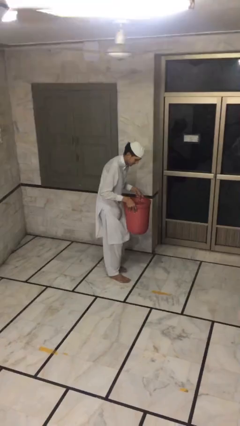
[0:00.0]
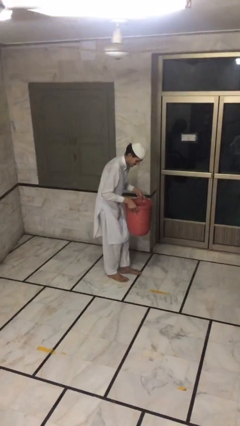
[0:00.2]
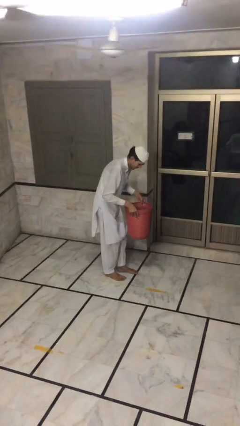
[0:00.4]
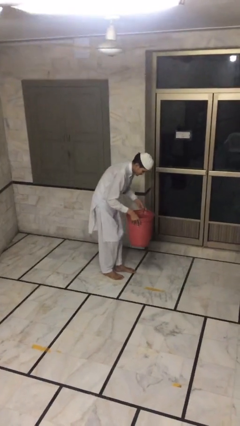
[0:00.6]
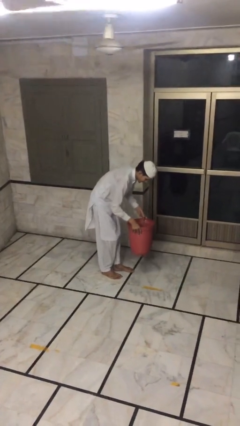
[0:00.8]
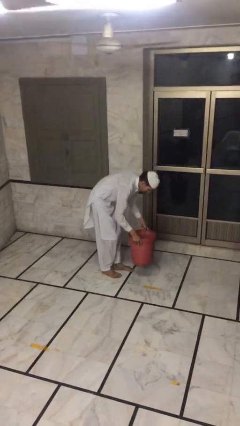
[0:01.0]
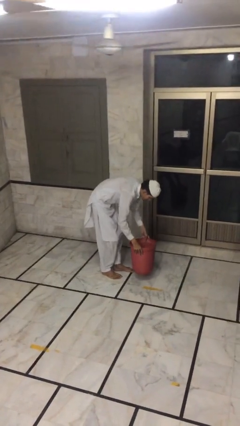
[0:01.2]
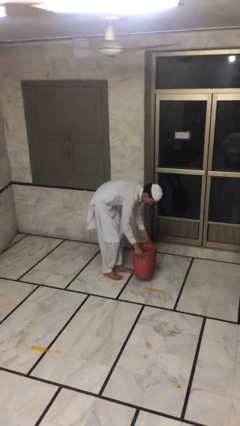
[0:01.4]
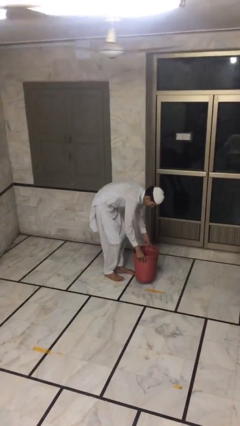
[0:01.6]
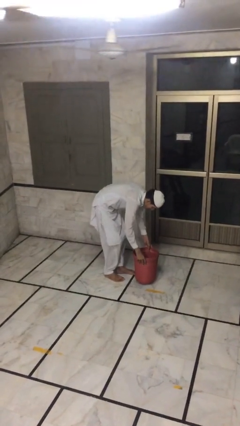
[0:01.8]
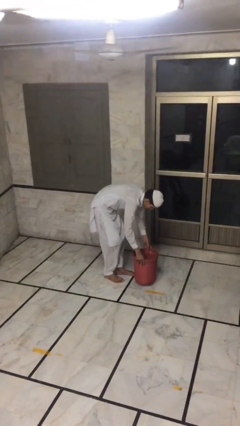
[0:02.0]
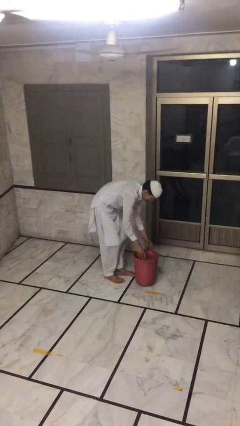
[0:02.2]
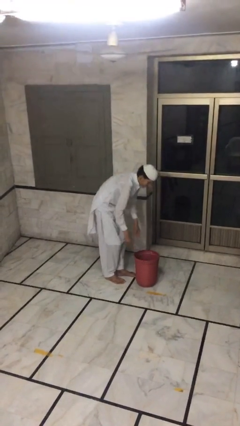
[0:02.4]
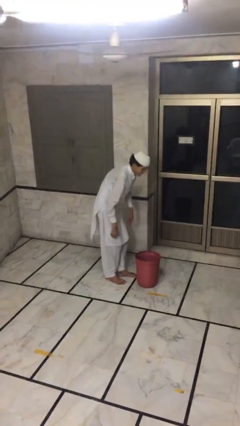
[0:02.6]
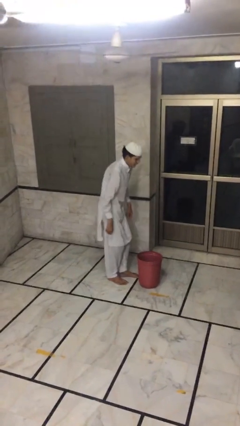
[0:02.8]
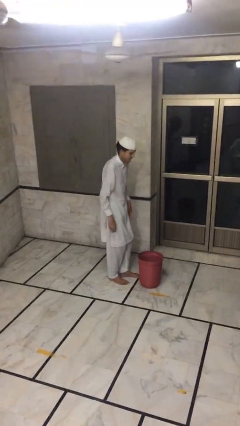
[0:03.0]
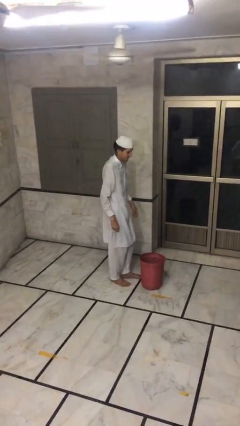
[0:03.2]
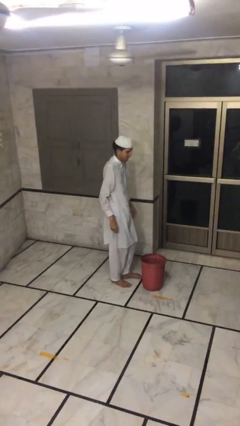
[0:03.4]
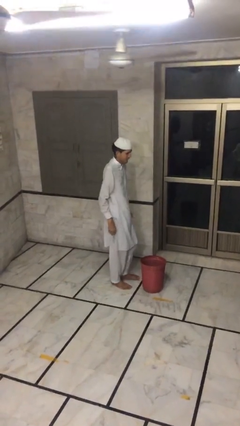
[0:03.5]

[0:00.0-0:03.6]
person puts down object on floor

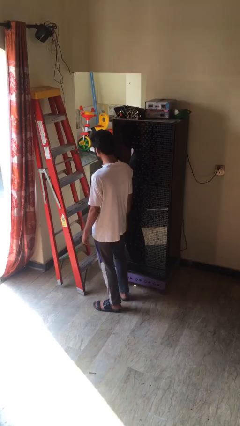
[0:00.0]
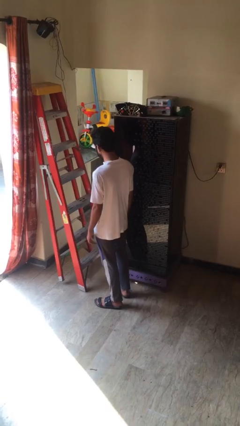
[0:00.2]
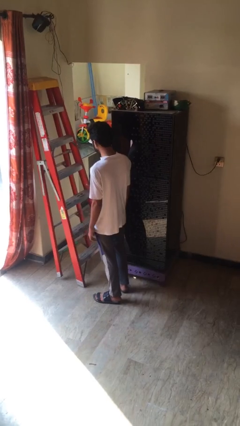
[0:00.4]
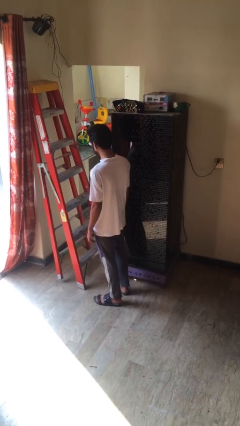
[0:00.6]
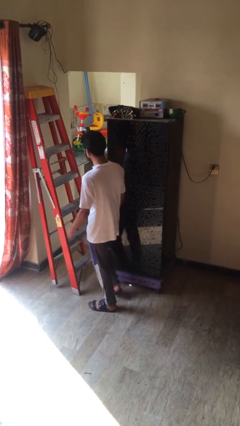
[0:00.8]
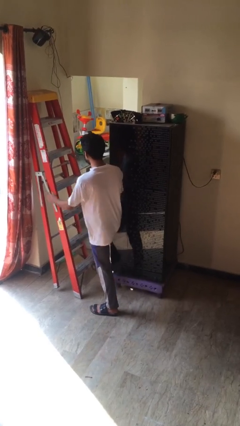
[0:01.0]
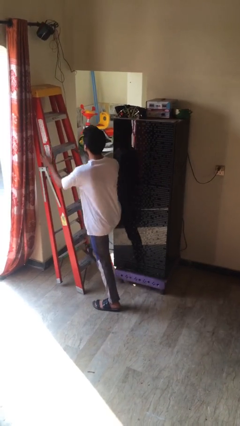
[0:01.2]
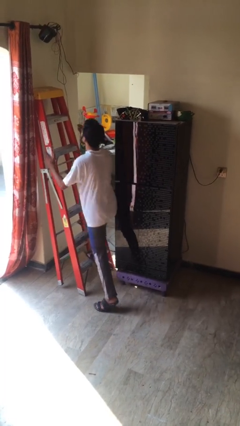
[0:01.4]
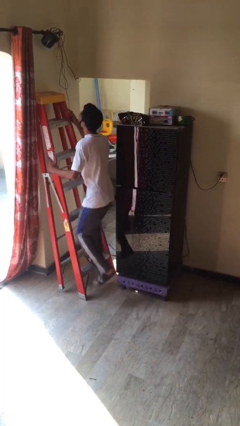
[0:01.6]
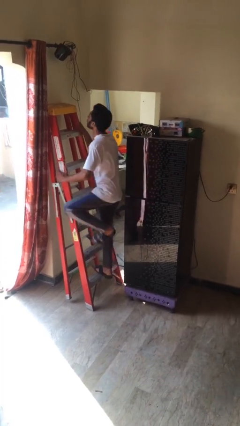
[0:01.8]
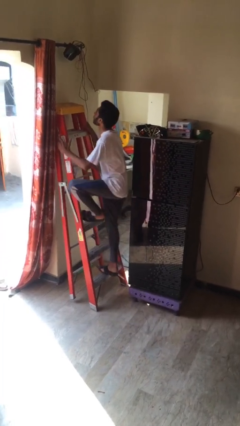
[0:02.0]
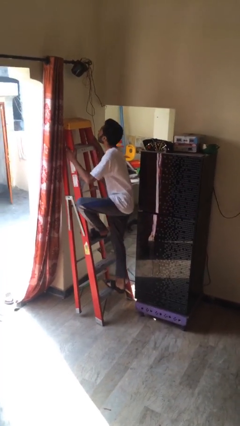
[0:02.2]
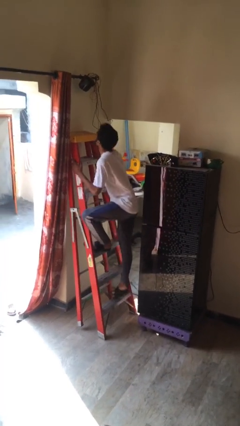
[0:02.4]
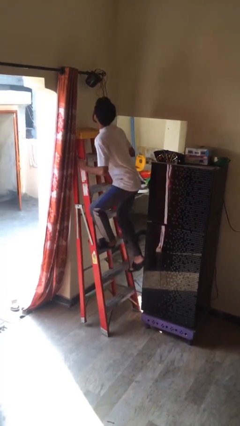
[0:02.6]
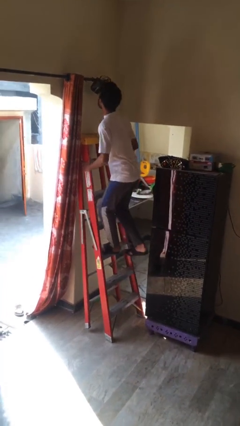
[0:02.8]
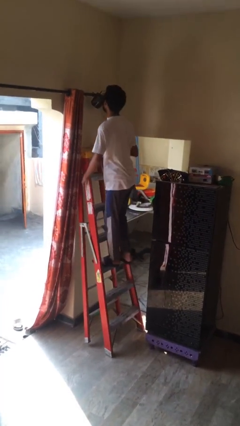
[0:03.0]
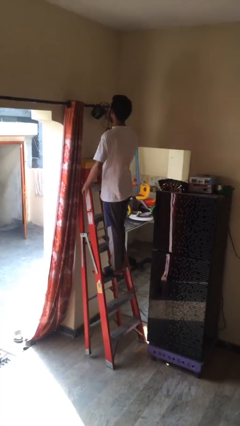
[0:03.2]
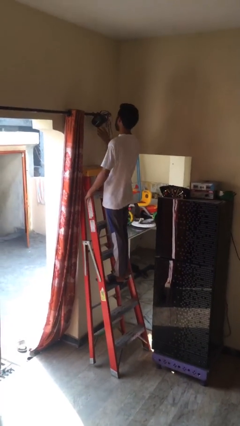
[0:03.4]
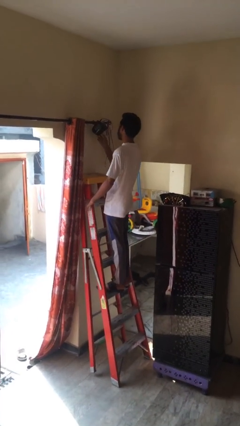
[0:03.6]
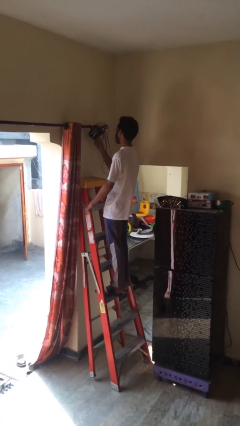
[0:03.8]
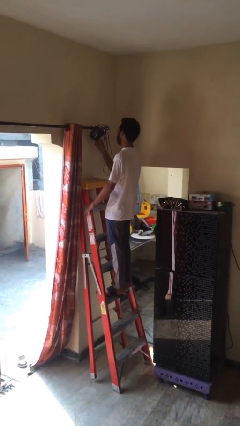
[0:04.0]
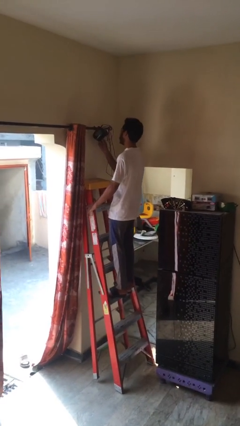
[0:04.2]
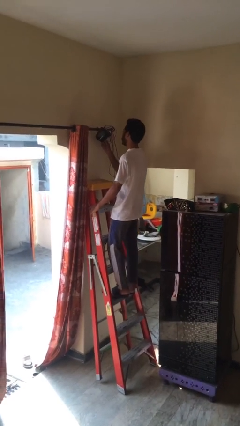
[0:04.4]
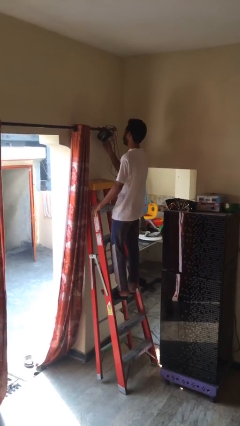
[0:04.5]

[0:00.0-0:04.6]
person climbs up ladder

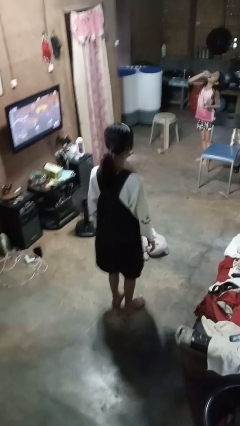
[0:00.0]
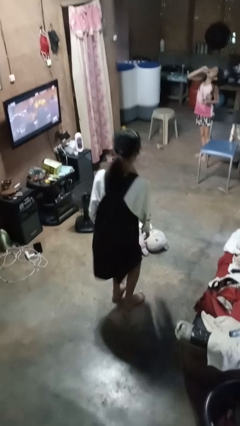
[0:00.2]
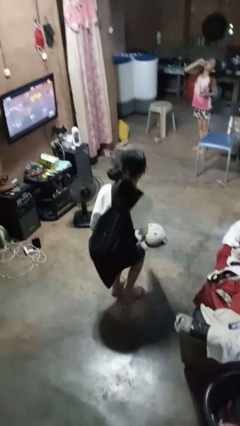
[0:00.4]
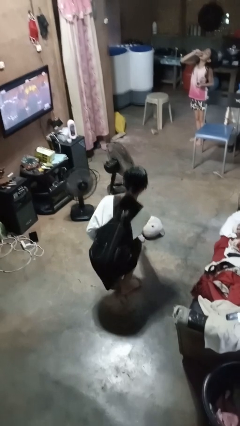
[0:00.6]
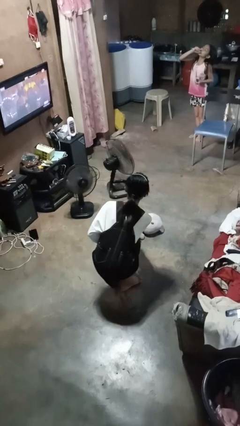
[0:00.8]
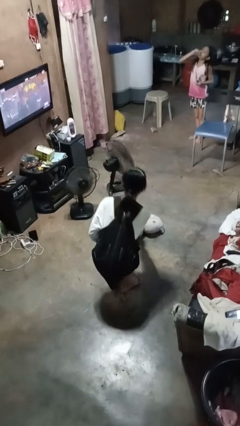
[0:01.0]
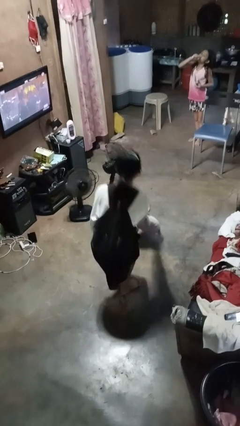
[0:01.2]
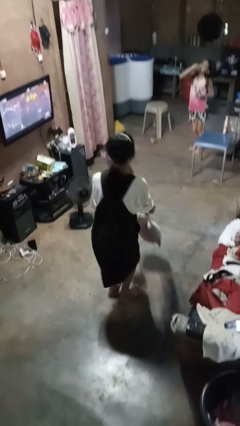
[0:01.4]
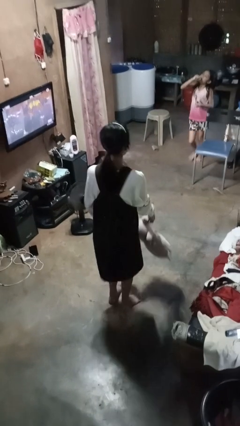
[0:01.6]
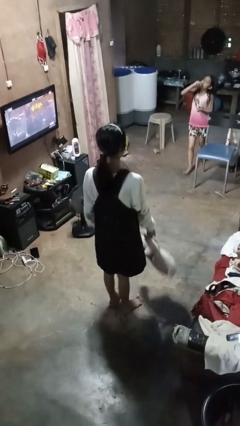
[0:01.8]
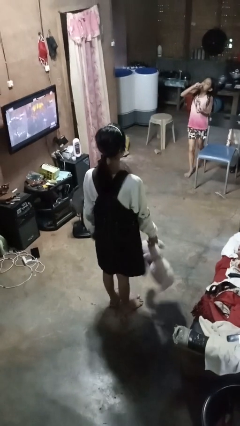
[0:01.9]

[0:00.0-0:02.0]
person picks up object from floor

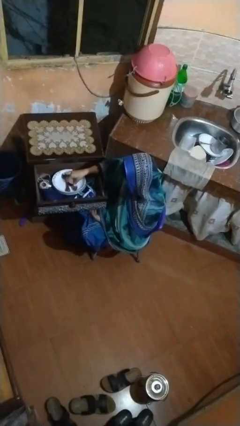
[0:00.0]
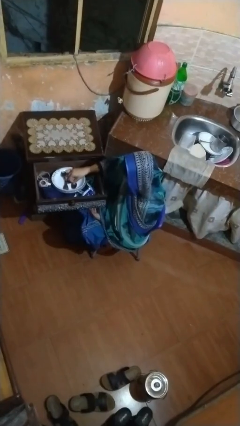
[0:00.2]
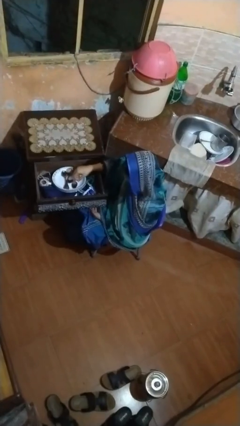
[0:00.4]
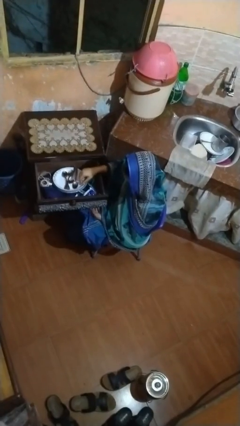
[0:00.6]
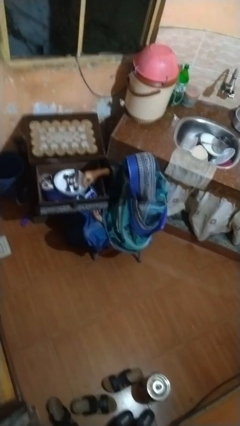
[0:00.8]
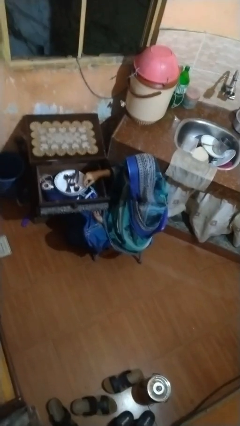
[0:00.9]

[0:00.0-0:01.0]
person puts object into kitchen drawer

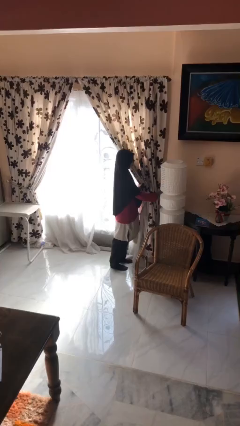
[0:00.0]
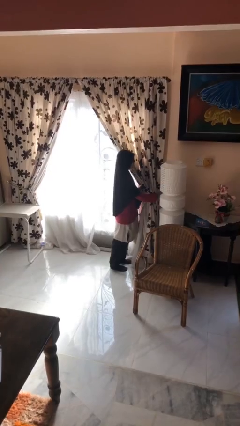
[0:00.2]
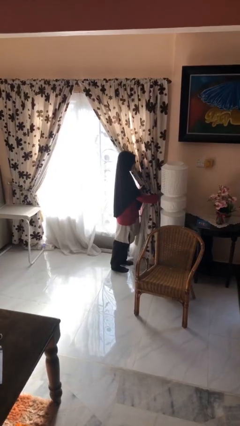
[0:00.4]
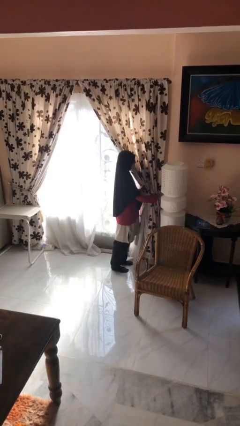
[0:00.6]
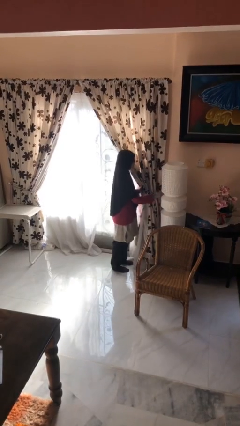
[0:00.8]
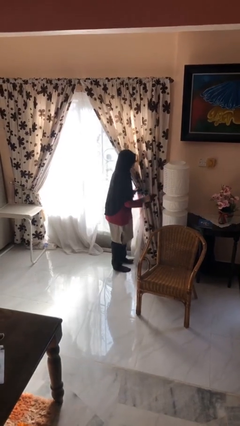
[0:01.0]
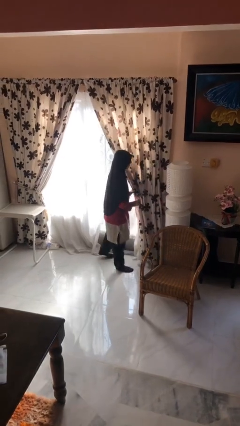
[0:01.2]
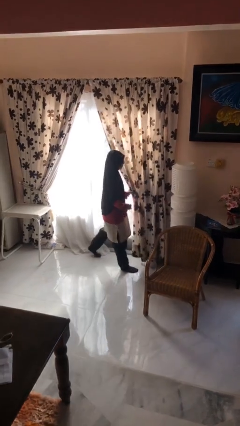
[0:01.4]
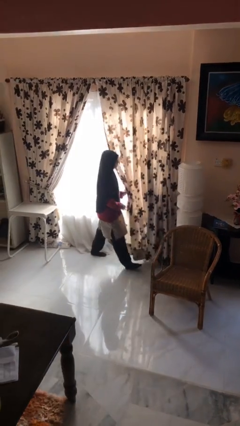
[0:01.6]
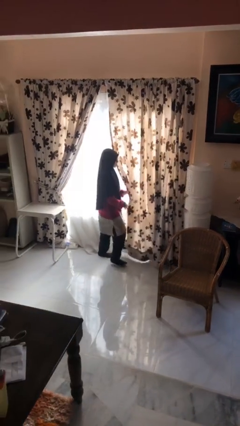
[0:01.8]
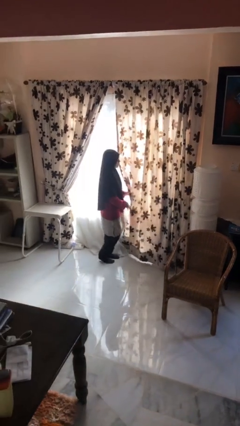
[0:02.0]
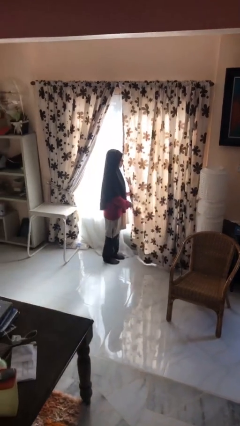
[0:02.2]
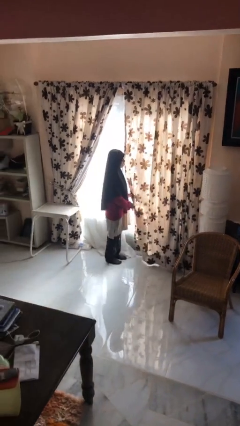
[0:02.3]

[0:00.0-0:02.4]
person closes curtains

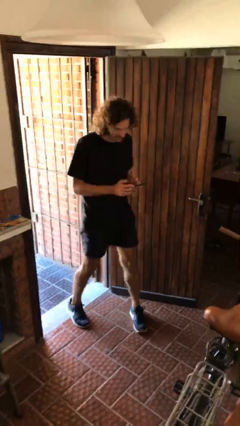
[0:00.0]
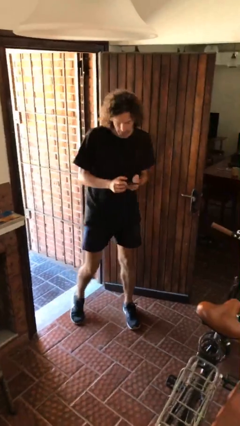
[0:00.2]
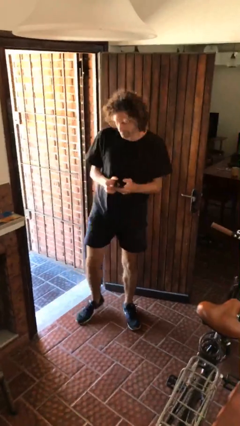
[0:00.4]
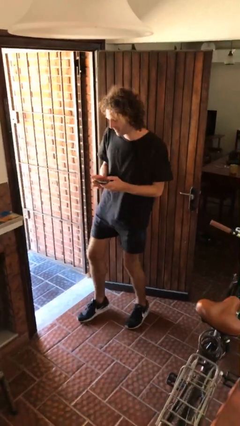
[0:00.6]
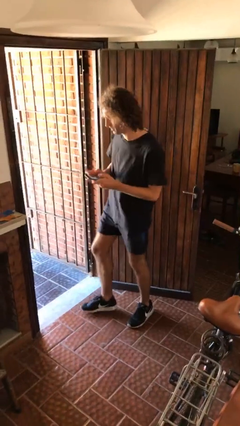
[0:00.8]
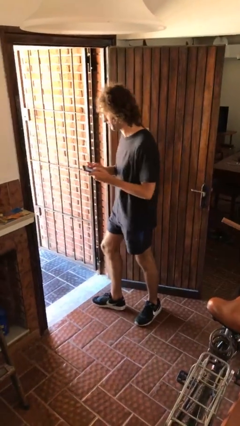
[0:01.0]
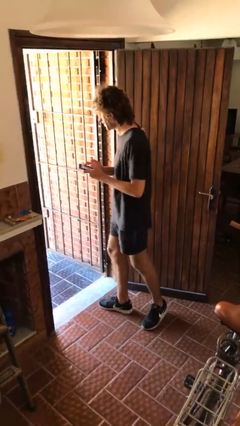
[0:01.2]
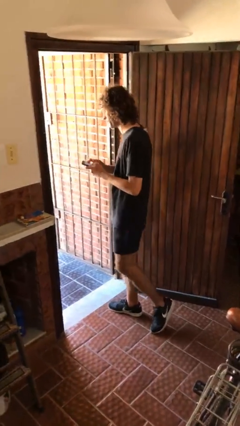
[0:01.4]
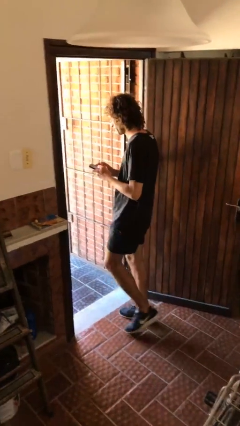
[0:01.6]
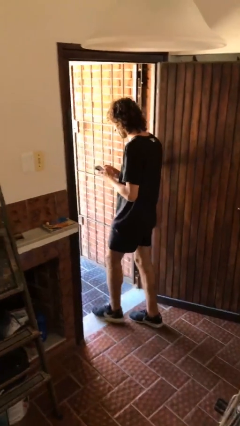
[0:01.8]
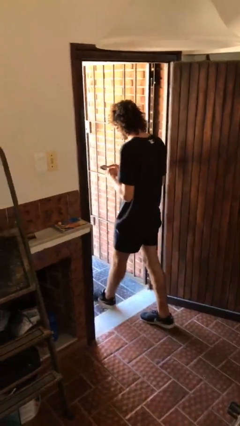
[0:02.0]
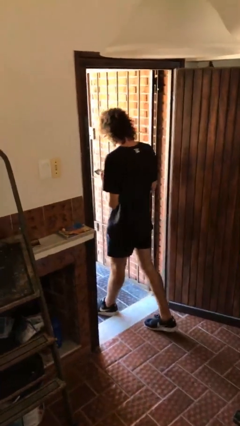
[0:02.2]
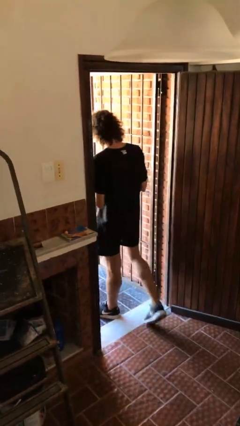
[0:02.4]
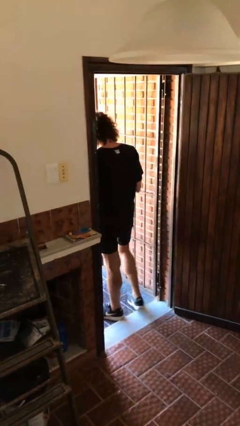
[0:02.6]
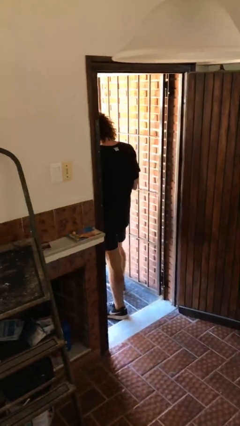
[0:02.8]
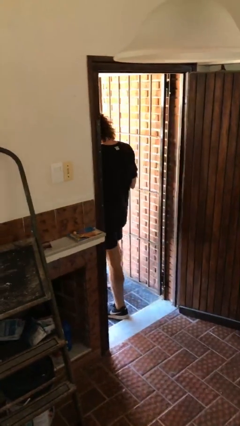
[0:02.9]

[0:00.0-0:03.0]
person exits scene through structure

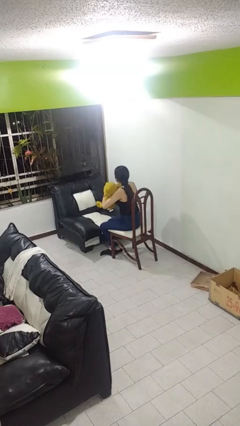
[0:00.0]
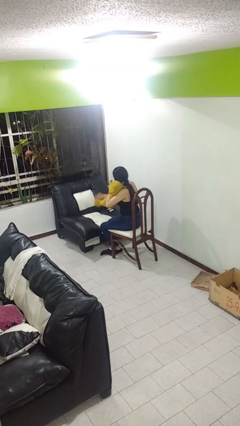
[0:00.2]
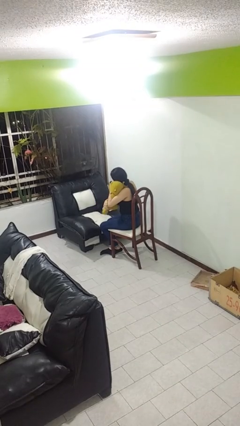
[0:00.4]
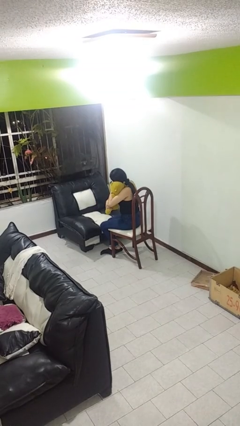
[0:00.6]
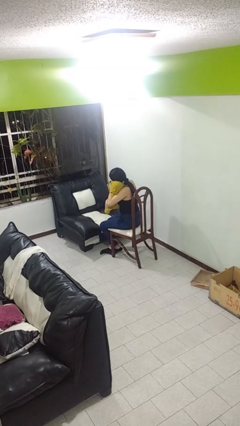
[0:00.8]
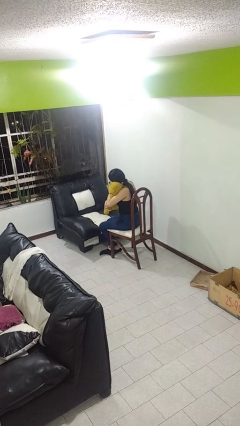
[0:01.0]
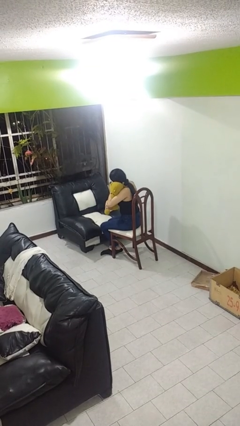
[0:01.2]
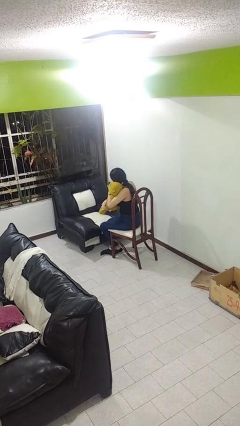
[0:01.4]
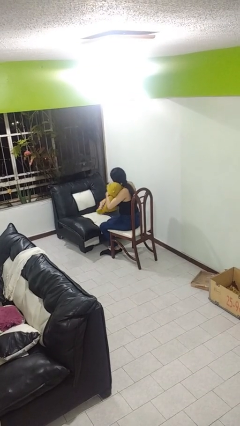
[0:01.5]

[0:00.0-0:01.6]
person hugs stuffed animal
